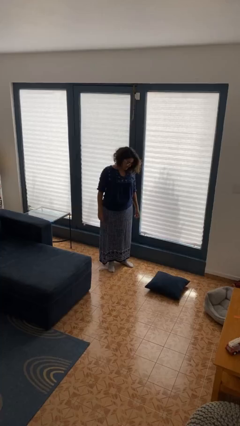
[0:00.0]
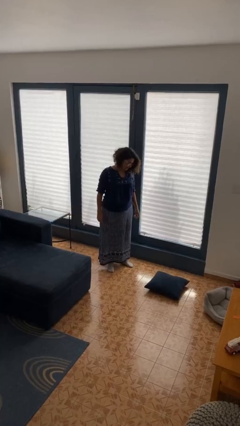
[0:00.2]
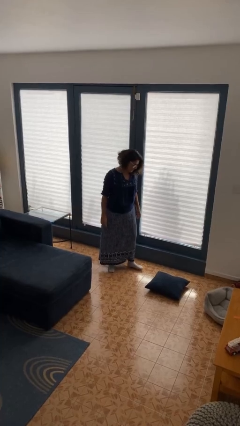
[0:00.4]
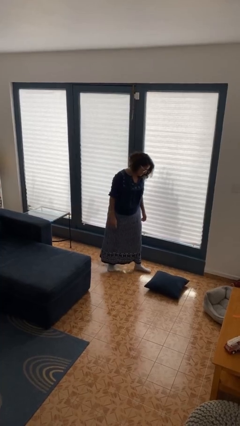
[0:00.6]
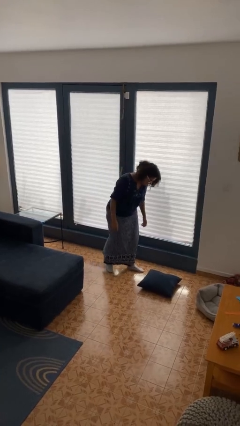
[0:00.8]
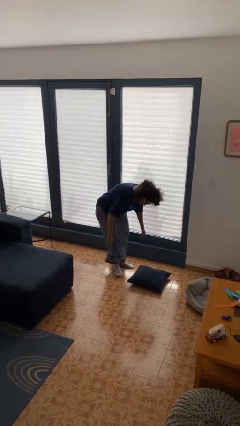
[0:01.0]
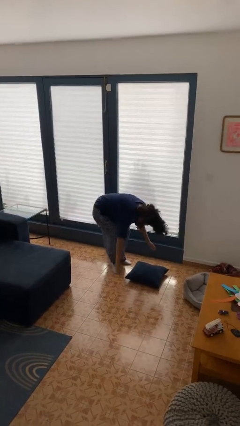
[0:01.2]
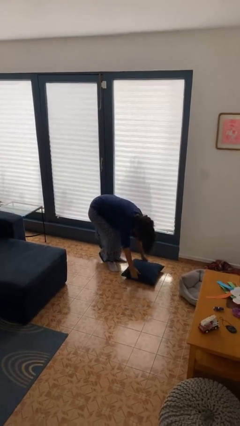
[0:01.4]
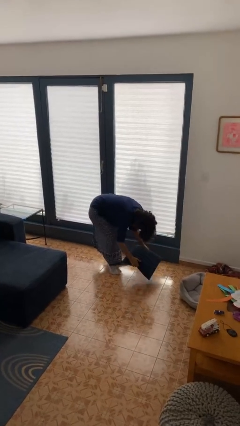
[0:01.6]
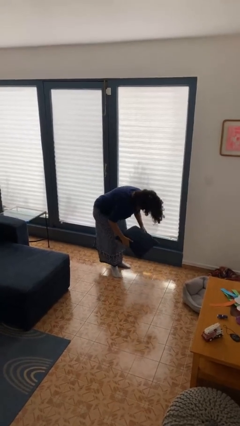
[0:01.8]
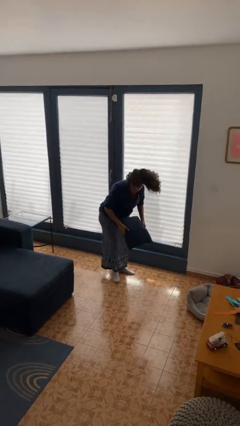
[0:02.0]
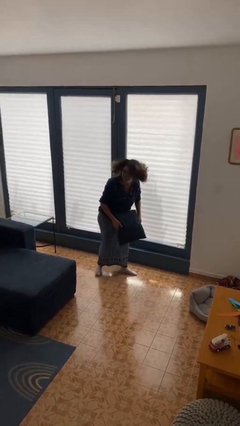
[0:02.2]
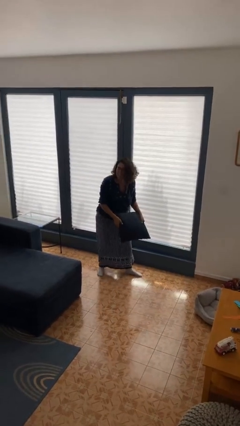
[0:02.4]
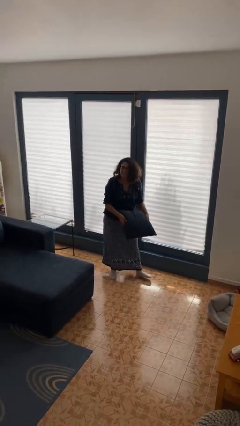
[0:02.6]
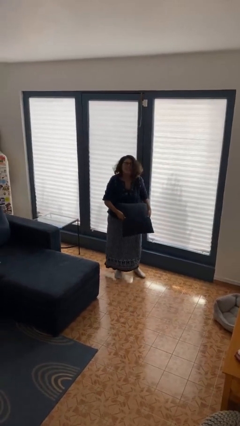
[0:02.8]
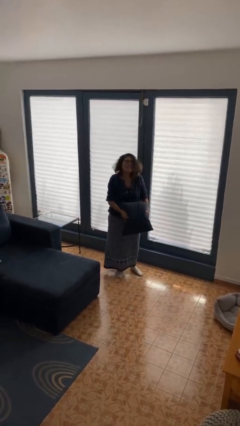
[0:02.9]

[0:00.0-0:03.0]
person picks up object from floor

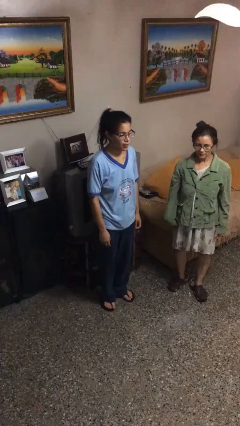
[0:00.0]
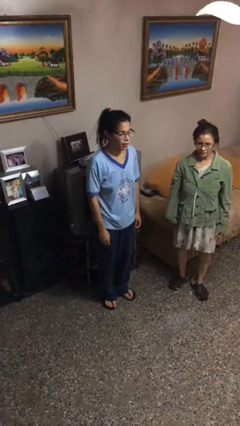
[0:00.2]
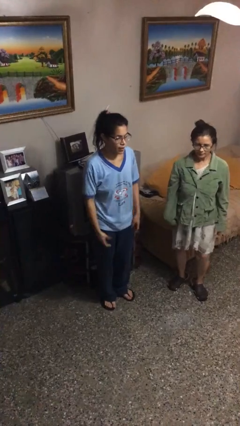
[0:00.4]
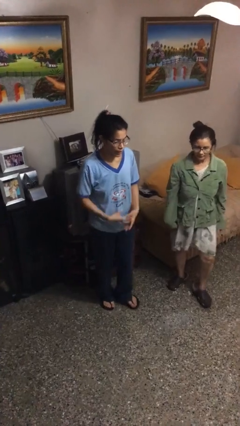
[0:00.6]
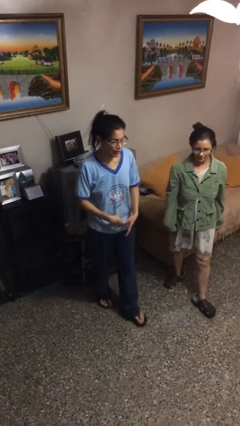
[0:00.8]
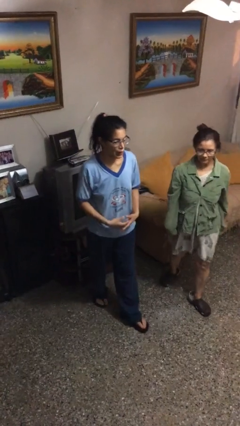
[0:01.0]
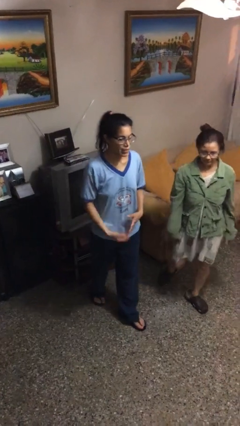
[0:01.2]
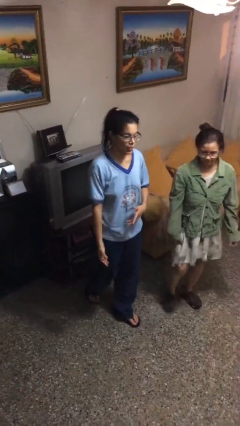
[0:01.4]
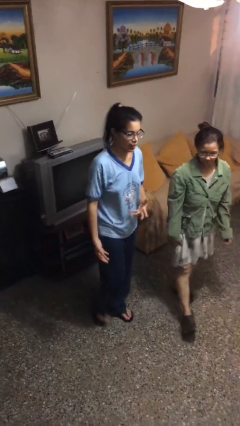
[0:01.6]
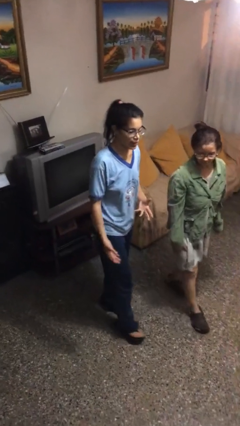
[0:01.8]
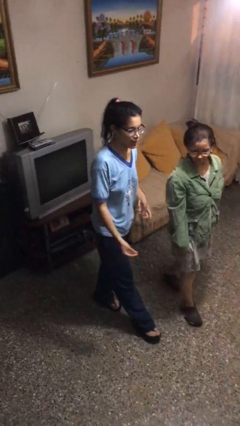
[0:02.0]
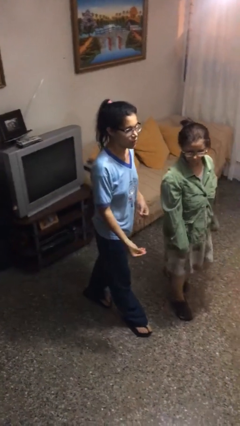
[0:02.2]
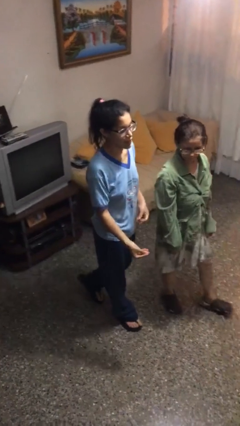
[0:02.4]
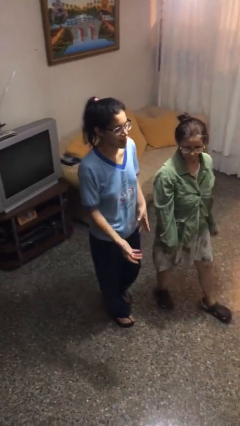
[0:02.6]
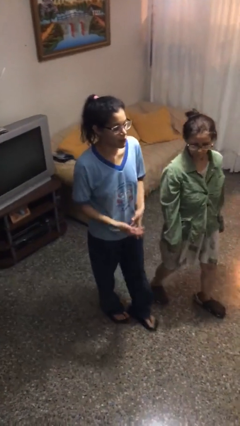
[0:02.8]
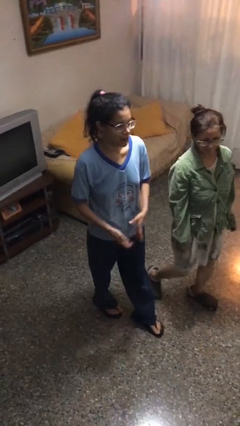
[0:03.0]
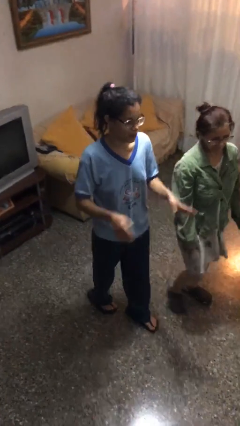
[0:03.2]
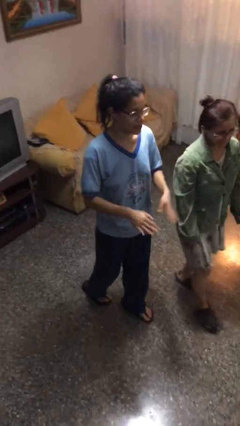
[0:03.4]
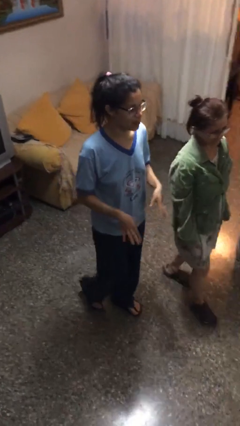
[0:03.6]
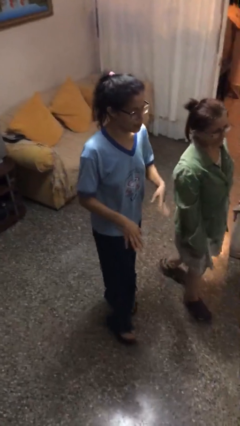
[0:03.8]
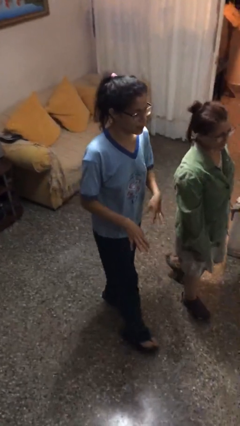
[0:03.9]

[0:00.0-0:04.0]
person talks to person

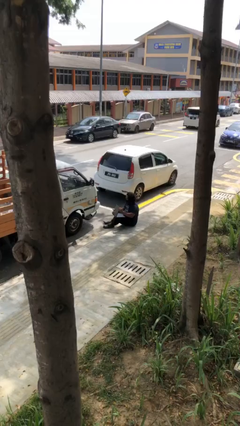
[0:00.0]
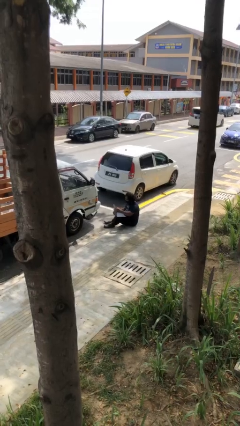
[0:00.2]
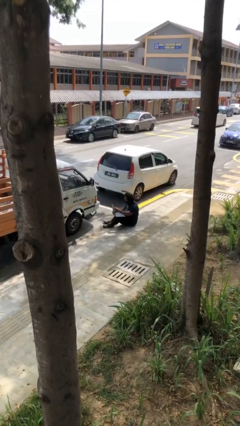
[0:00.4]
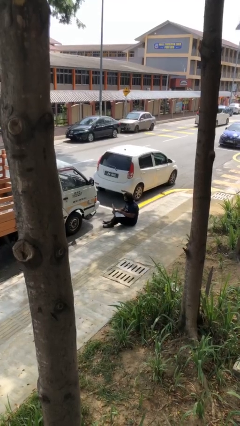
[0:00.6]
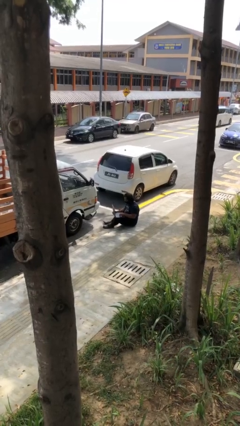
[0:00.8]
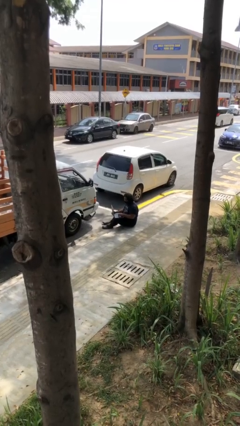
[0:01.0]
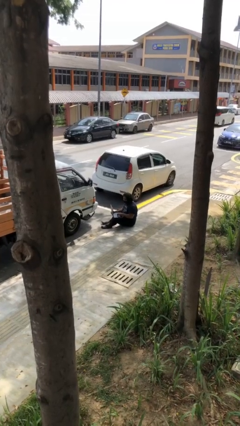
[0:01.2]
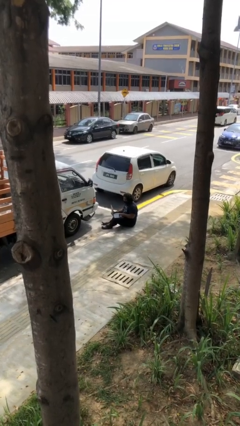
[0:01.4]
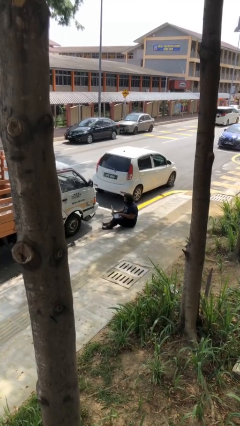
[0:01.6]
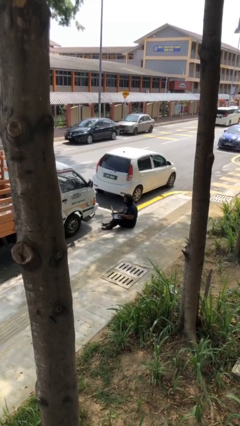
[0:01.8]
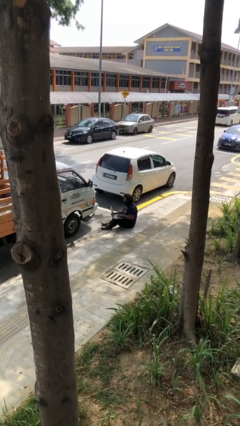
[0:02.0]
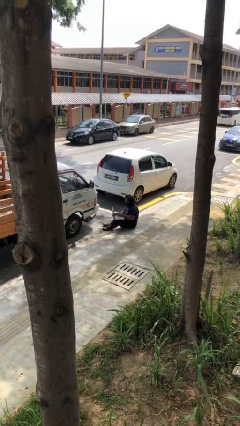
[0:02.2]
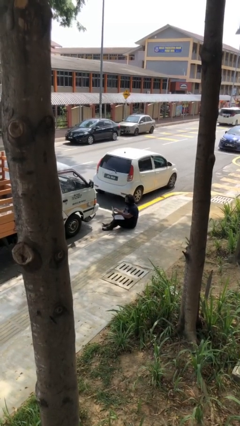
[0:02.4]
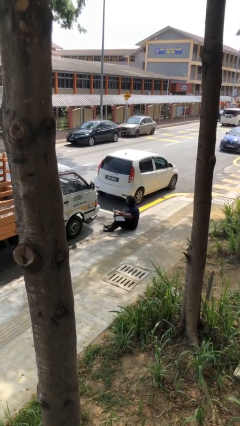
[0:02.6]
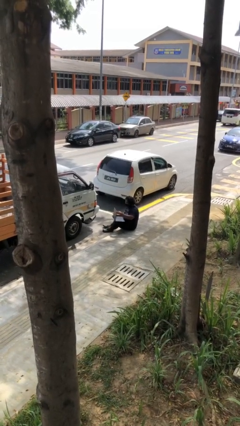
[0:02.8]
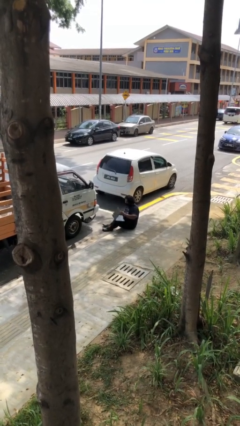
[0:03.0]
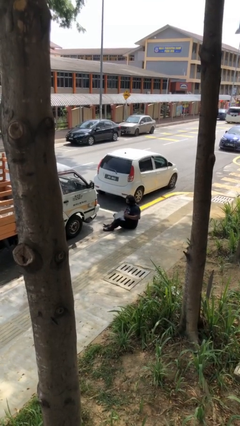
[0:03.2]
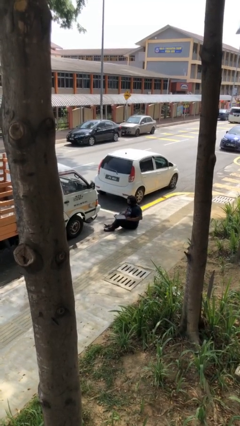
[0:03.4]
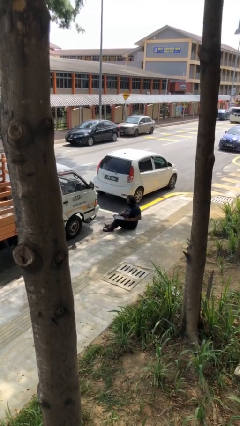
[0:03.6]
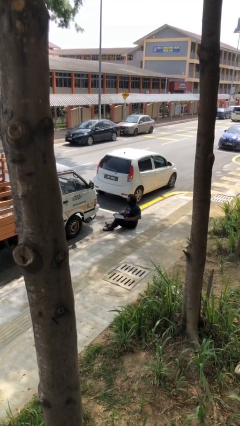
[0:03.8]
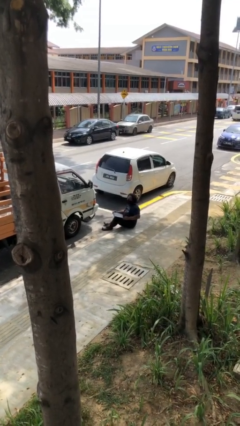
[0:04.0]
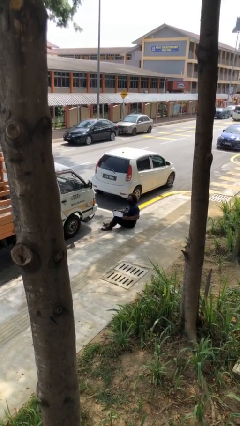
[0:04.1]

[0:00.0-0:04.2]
person interacts with laptop

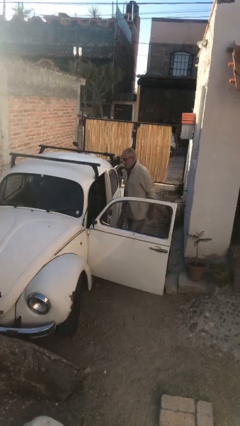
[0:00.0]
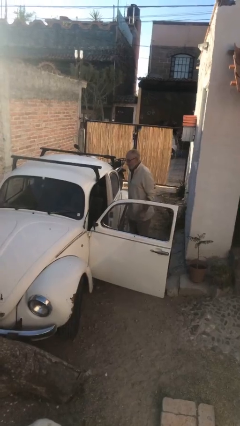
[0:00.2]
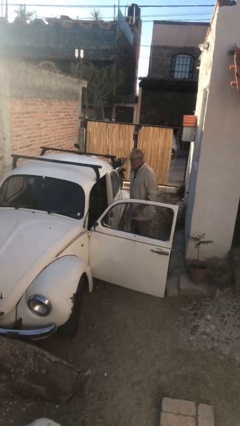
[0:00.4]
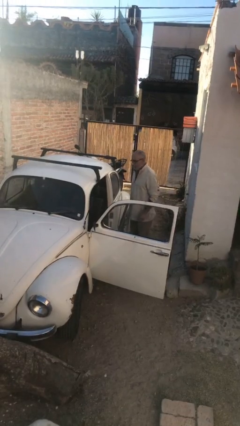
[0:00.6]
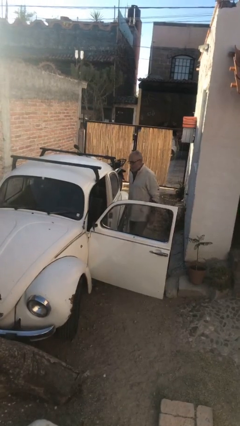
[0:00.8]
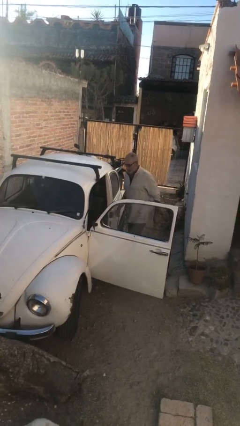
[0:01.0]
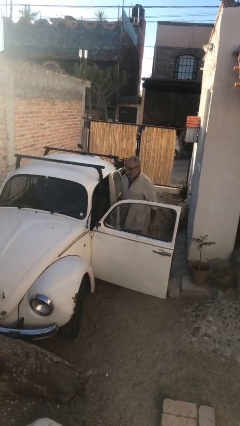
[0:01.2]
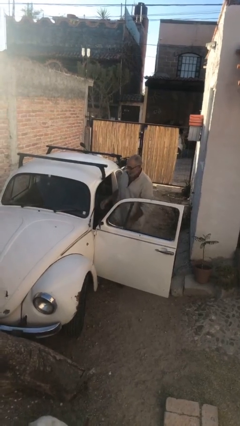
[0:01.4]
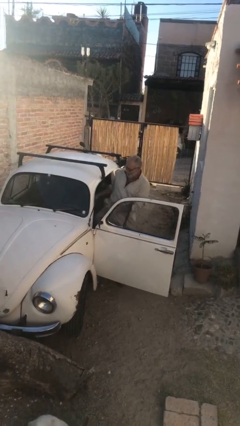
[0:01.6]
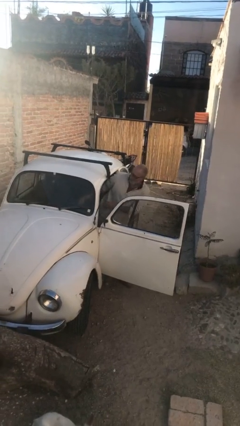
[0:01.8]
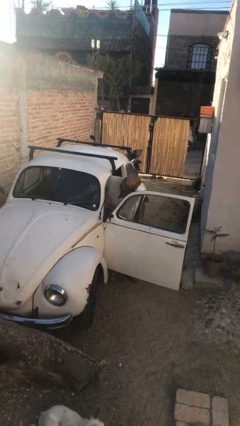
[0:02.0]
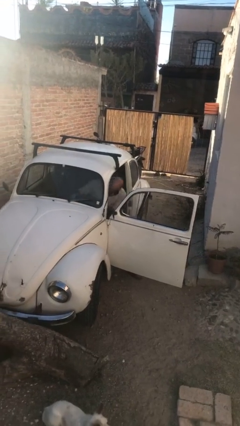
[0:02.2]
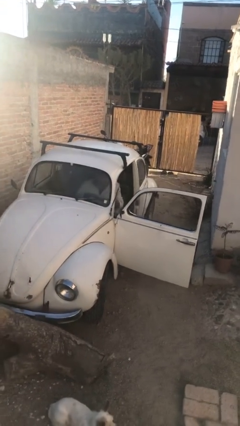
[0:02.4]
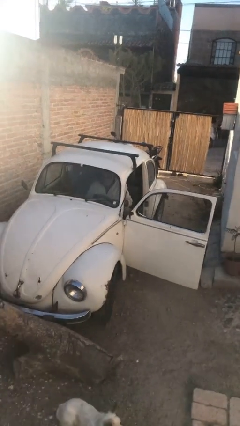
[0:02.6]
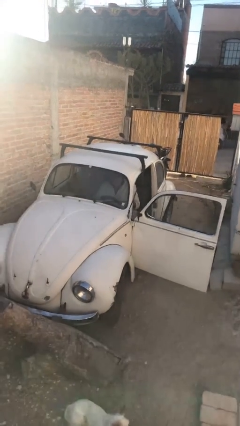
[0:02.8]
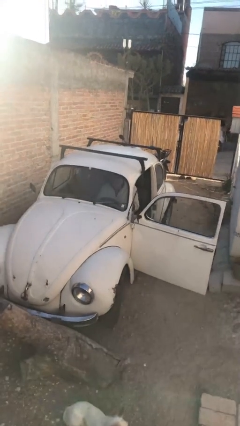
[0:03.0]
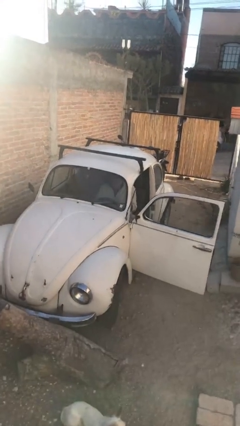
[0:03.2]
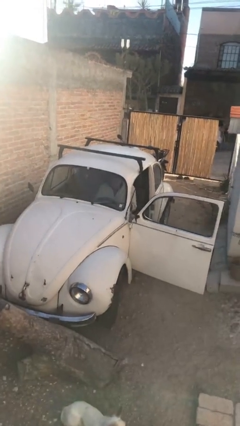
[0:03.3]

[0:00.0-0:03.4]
person enters car

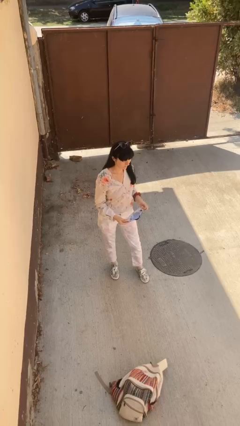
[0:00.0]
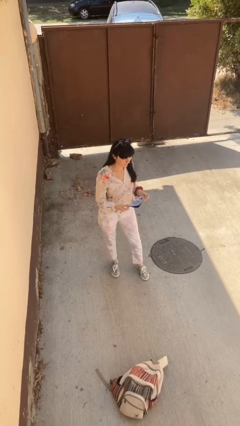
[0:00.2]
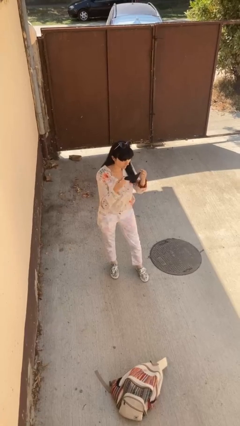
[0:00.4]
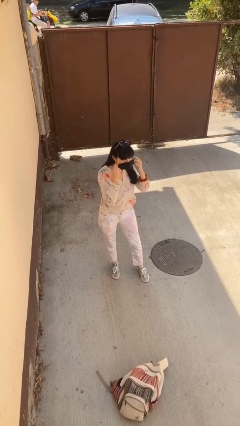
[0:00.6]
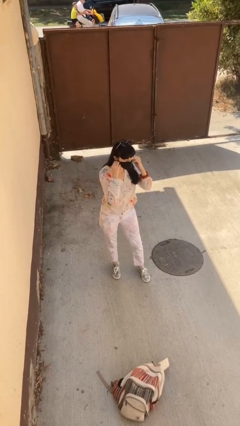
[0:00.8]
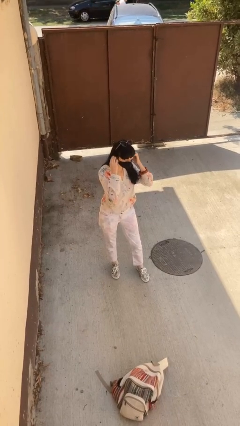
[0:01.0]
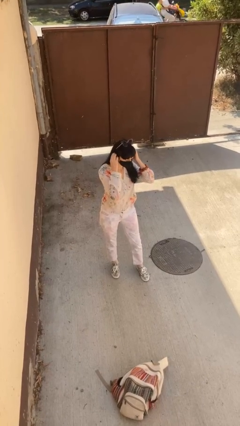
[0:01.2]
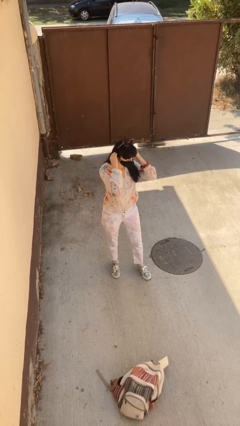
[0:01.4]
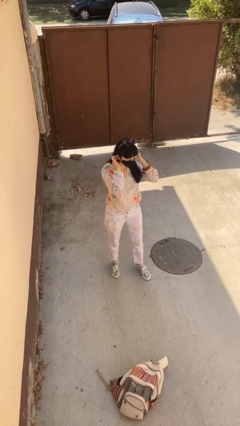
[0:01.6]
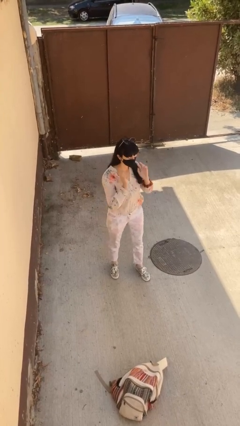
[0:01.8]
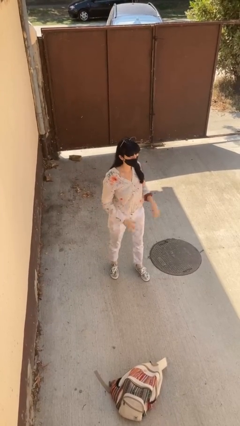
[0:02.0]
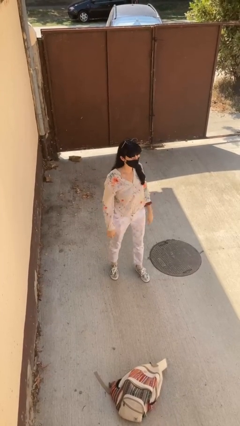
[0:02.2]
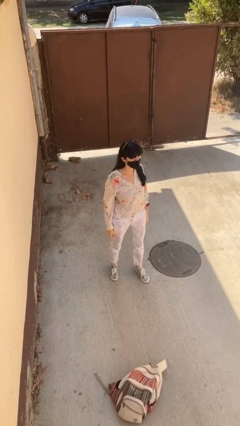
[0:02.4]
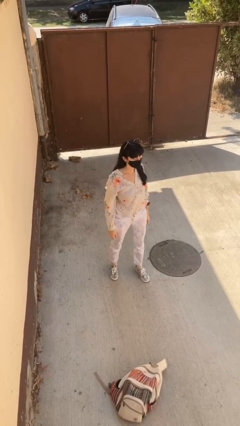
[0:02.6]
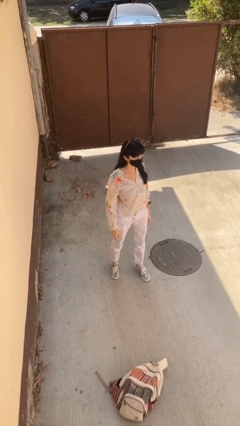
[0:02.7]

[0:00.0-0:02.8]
person puts on facemask
